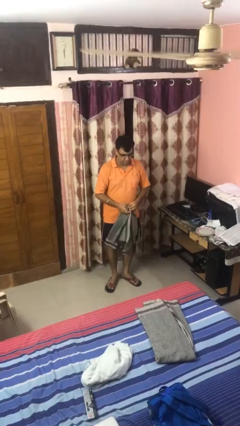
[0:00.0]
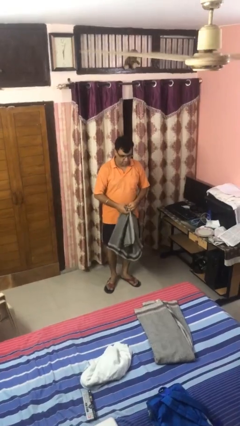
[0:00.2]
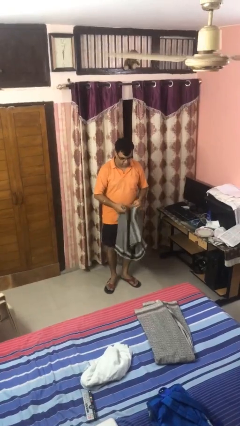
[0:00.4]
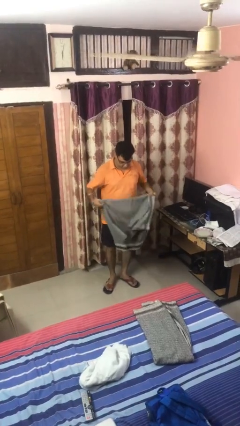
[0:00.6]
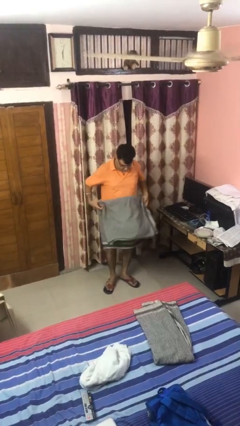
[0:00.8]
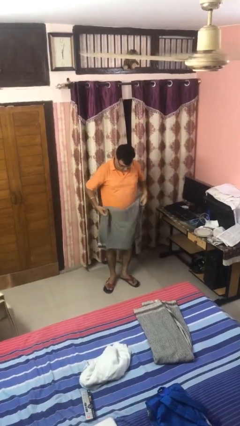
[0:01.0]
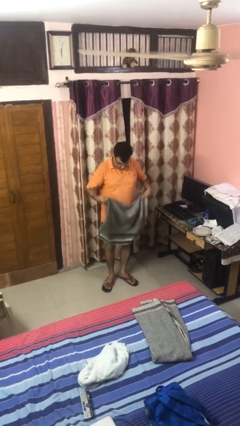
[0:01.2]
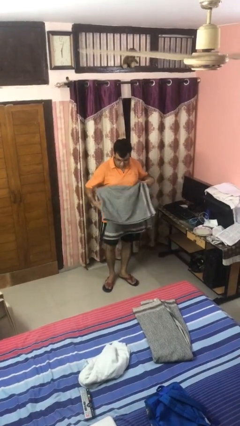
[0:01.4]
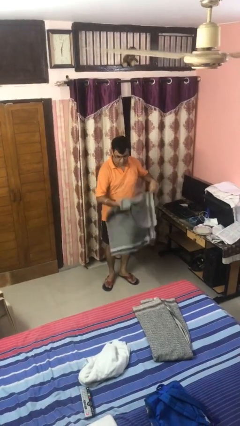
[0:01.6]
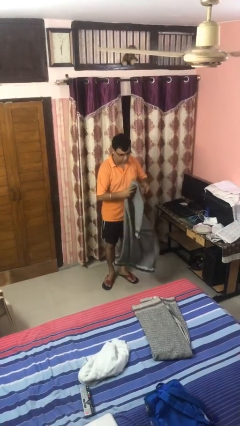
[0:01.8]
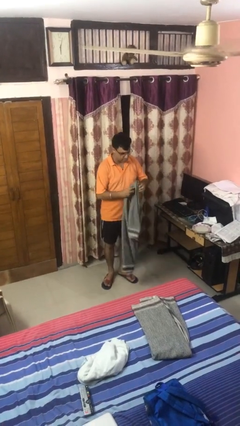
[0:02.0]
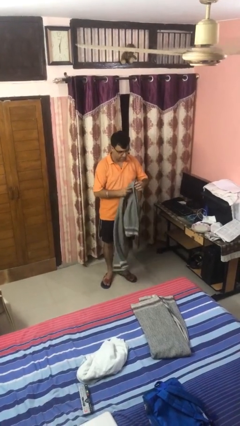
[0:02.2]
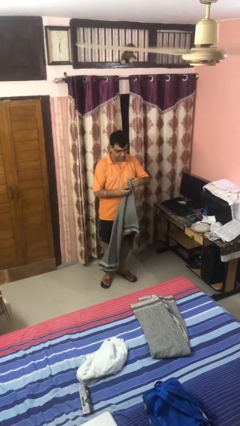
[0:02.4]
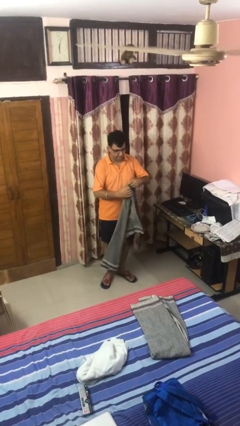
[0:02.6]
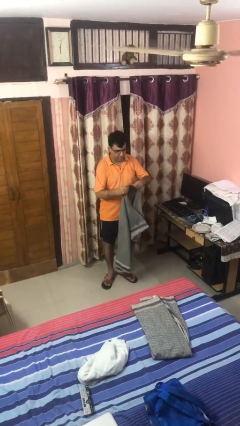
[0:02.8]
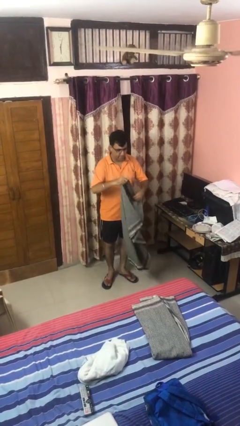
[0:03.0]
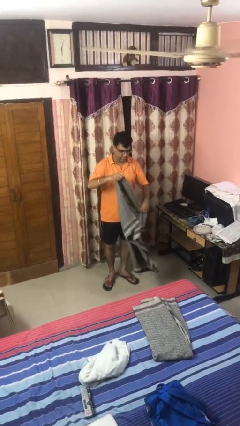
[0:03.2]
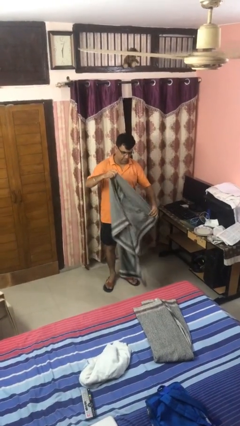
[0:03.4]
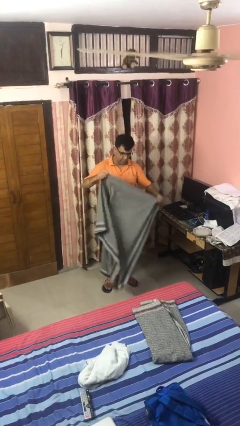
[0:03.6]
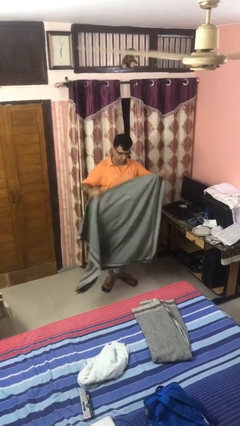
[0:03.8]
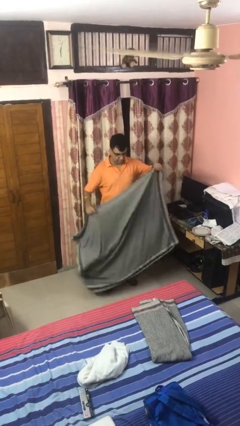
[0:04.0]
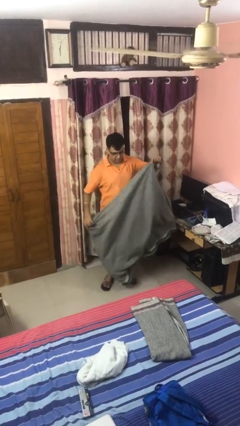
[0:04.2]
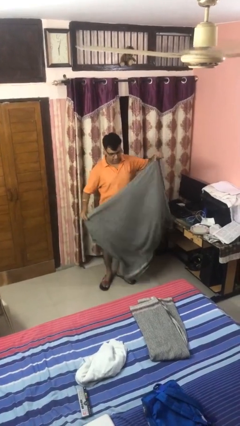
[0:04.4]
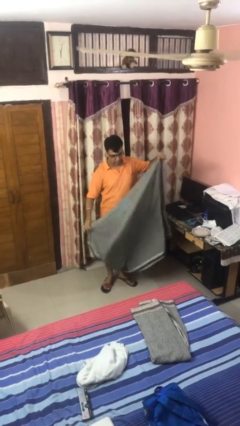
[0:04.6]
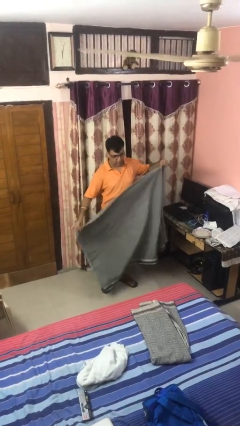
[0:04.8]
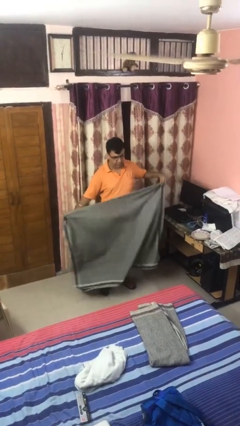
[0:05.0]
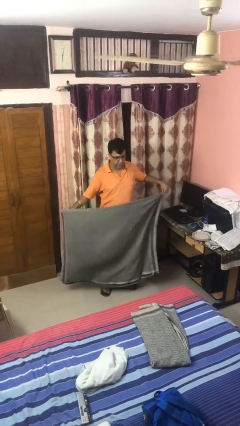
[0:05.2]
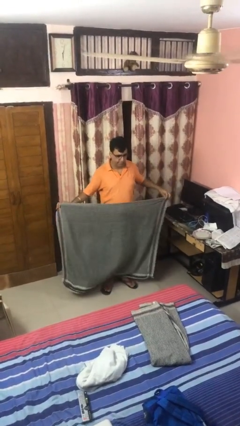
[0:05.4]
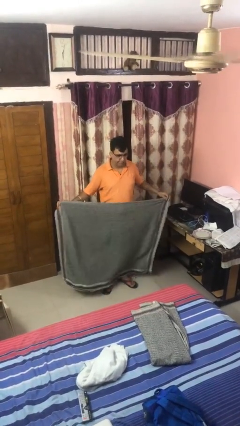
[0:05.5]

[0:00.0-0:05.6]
person unfolds blanket

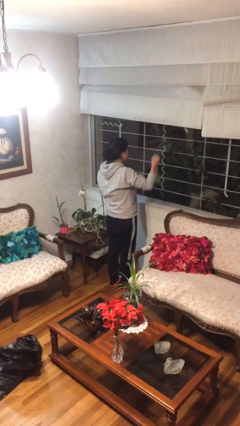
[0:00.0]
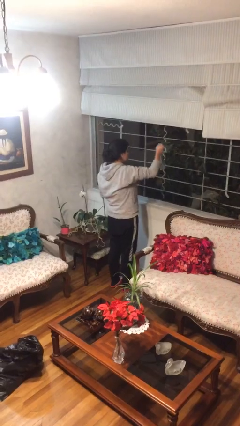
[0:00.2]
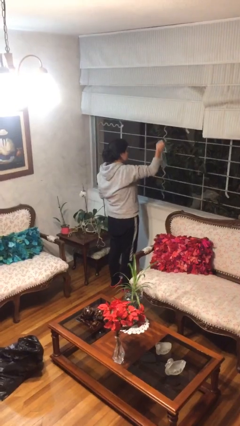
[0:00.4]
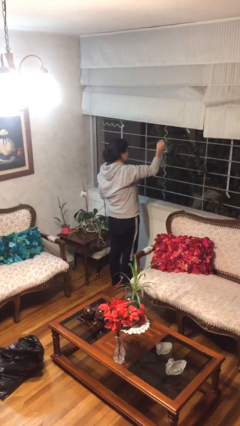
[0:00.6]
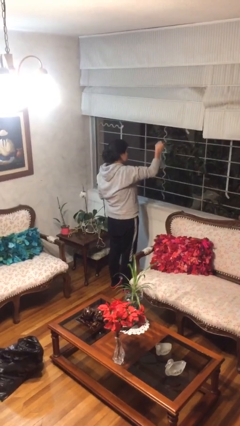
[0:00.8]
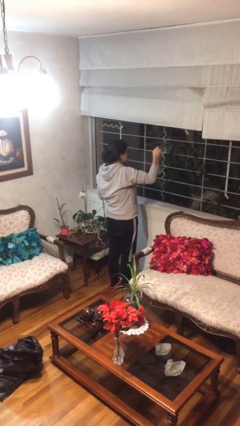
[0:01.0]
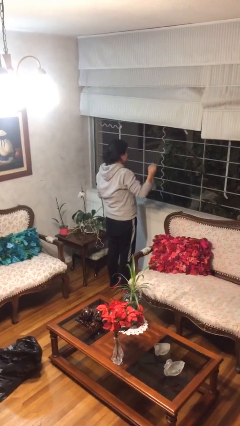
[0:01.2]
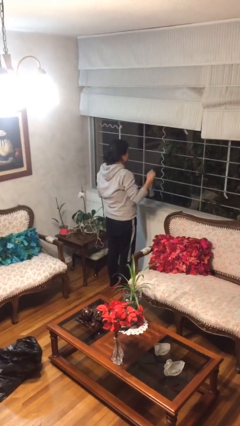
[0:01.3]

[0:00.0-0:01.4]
person sprays from bottle

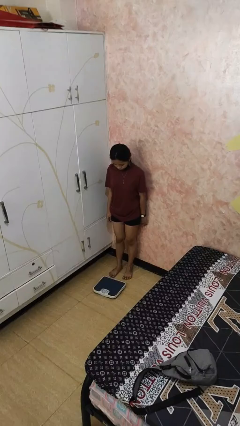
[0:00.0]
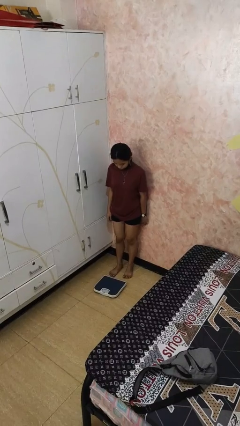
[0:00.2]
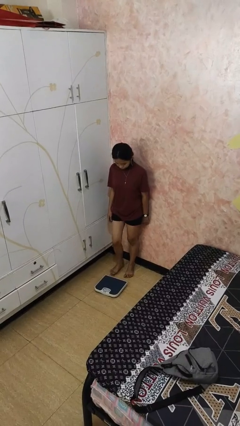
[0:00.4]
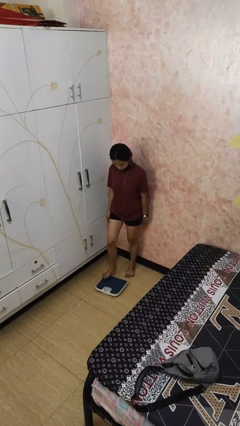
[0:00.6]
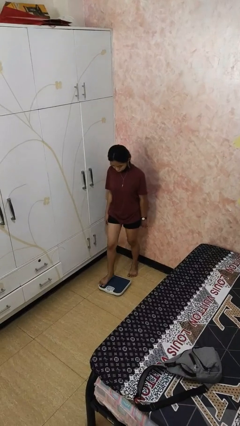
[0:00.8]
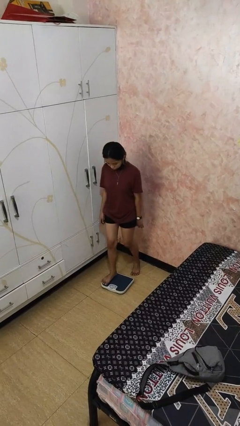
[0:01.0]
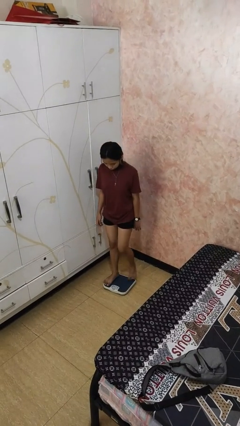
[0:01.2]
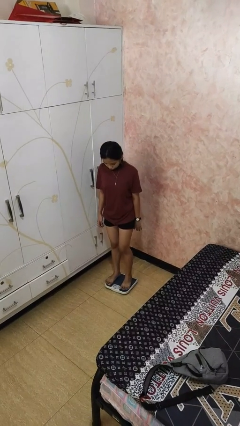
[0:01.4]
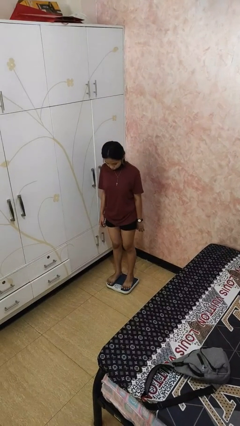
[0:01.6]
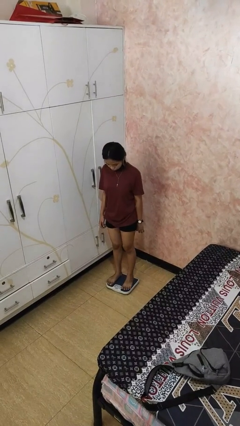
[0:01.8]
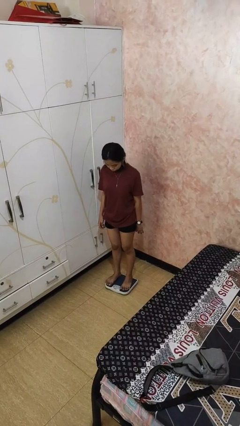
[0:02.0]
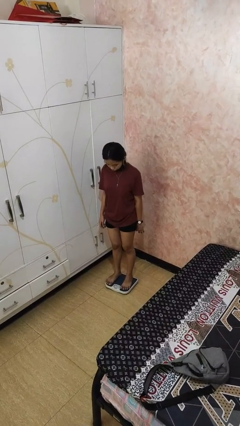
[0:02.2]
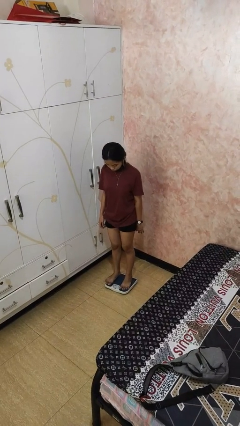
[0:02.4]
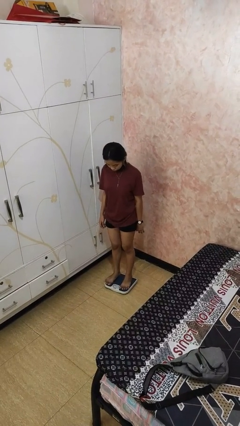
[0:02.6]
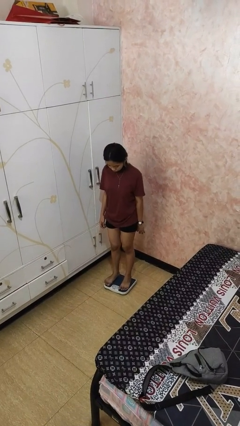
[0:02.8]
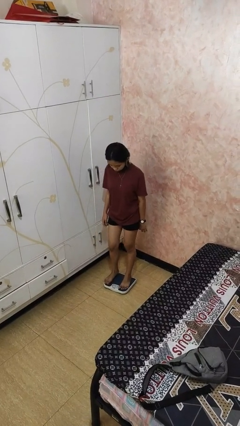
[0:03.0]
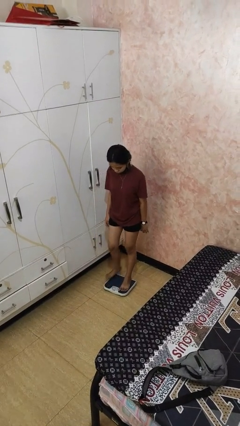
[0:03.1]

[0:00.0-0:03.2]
person uses bodyweight scale

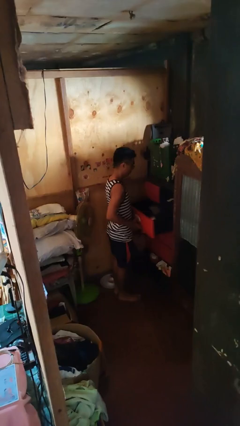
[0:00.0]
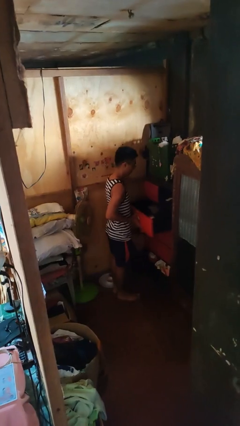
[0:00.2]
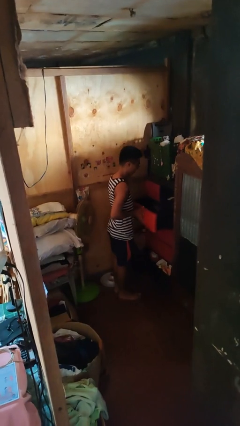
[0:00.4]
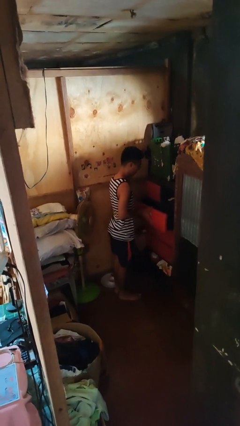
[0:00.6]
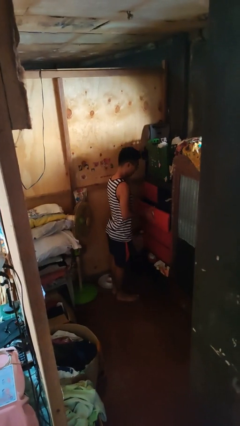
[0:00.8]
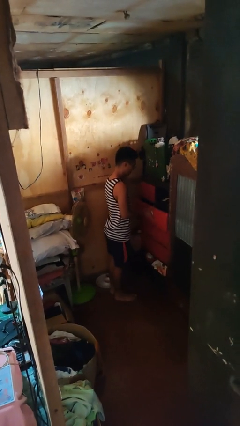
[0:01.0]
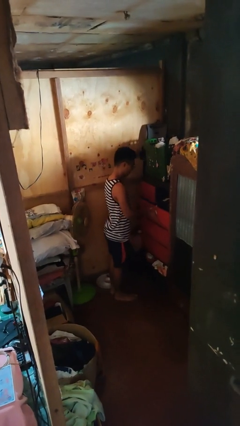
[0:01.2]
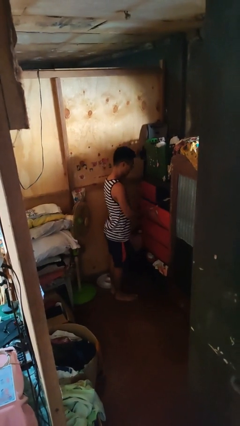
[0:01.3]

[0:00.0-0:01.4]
person closes dresser drawer

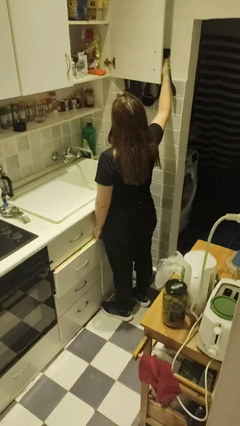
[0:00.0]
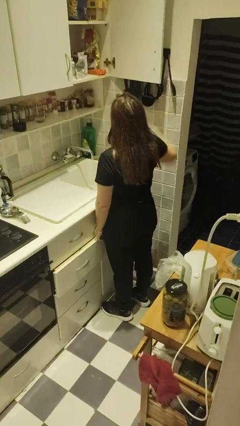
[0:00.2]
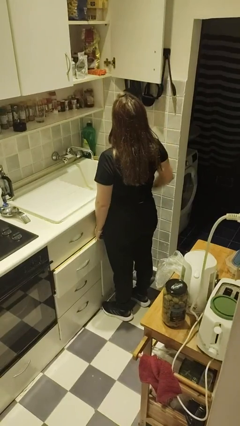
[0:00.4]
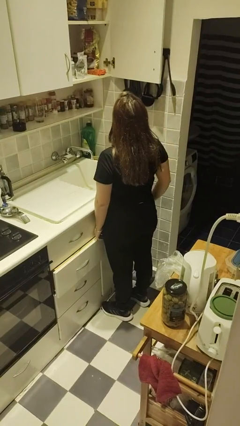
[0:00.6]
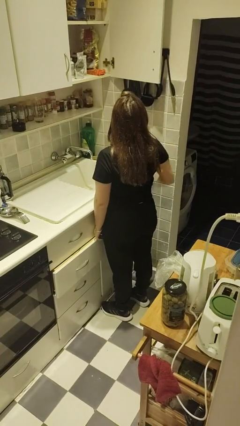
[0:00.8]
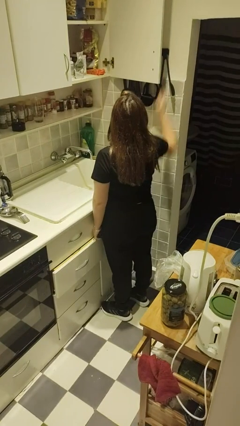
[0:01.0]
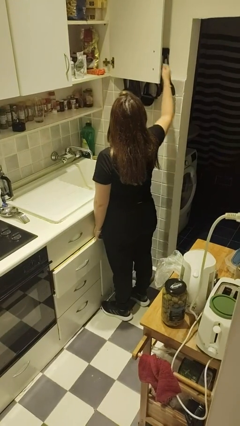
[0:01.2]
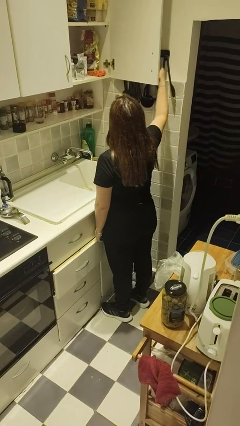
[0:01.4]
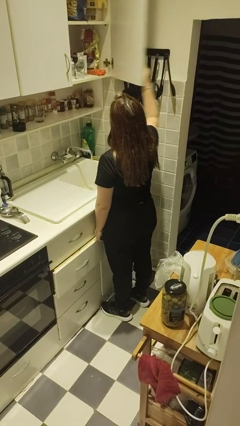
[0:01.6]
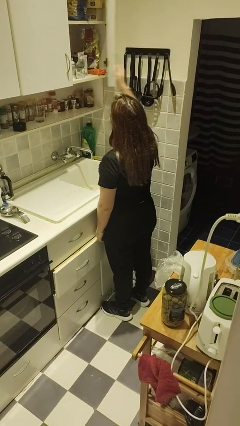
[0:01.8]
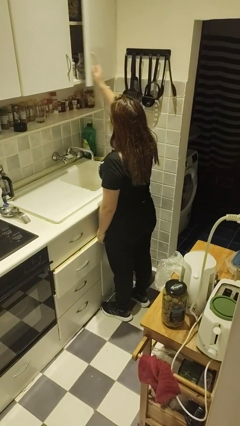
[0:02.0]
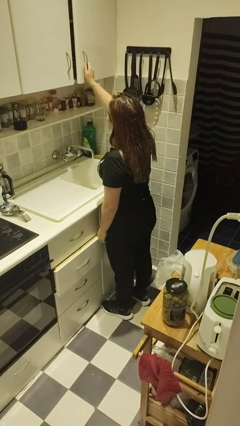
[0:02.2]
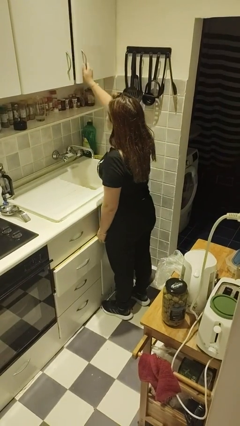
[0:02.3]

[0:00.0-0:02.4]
person closes cabinet

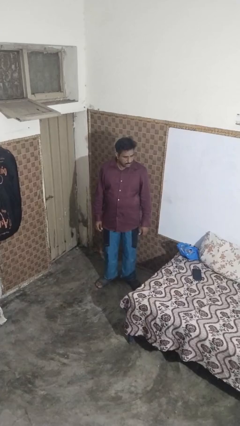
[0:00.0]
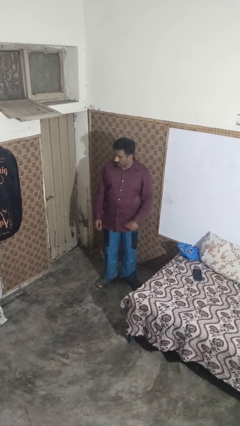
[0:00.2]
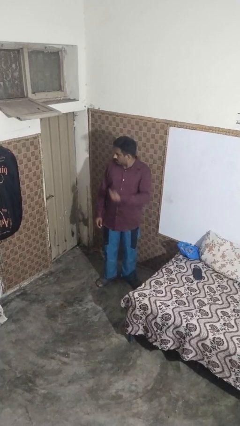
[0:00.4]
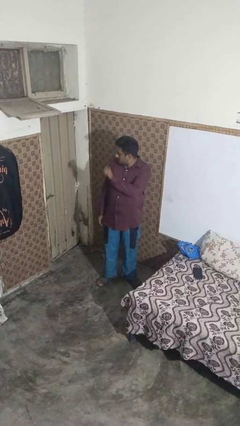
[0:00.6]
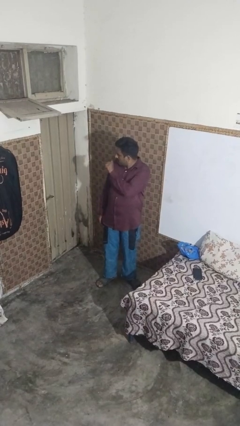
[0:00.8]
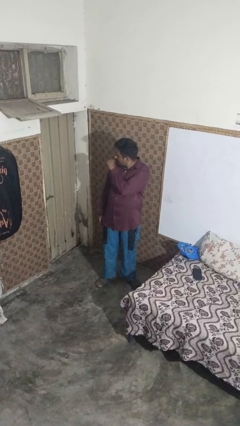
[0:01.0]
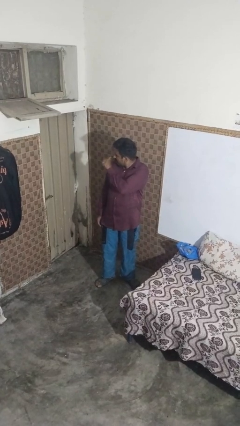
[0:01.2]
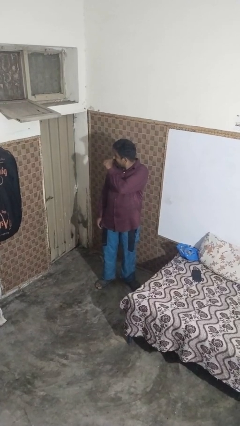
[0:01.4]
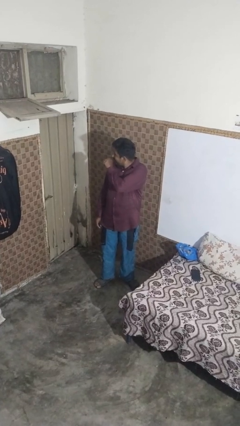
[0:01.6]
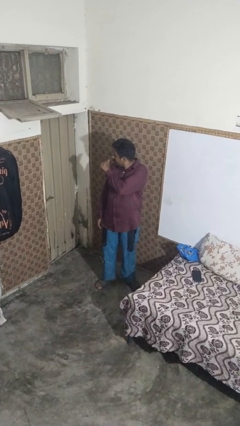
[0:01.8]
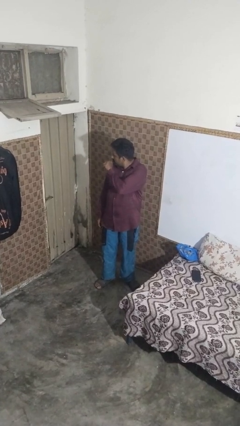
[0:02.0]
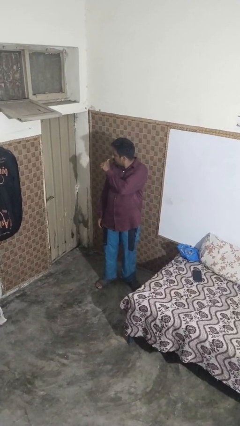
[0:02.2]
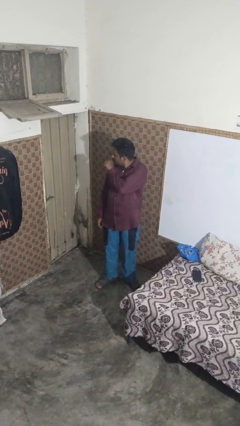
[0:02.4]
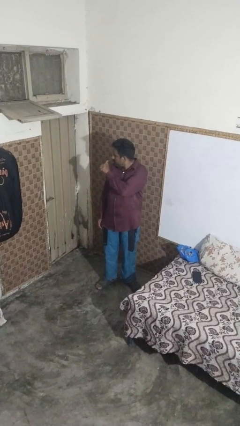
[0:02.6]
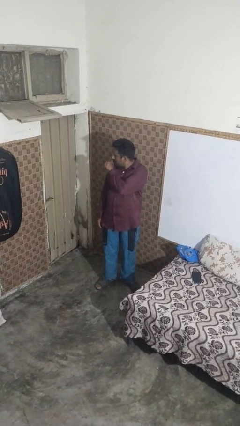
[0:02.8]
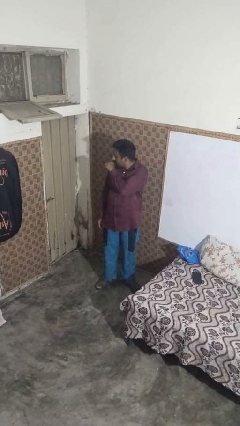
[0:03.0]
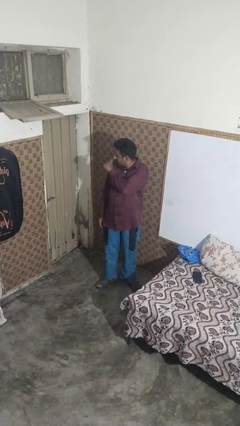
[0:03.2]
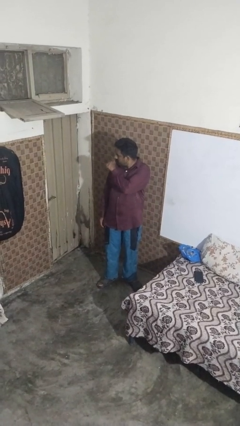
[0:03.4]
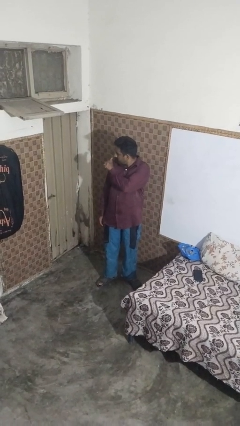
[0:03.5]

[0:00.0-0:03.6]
person gestures behind me

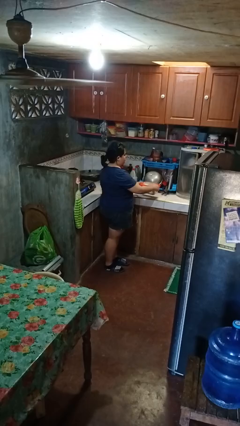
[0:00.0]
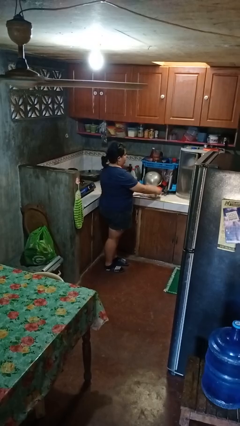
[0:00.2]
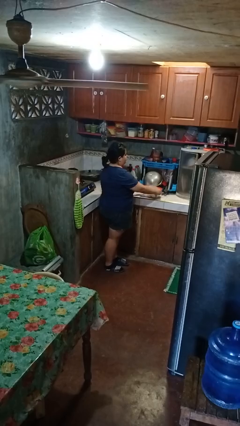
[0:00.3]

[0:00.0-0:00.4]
person puts down object on countertop
